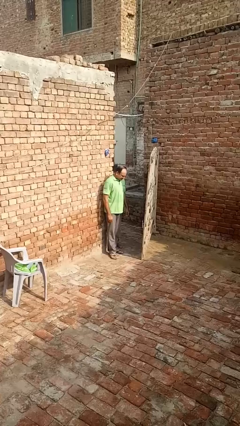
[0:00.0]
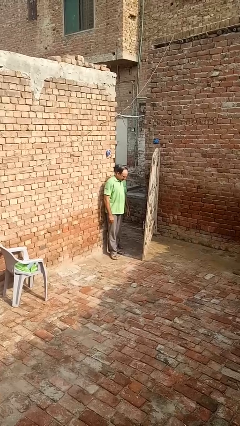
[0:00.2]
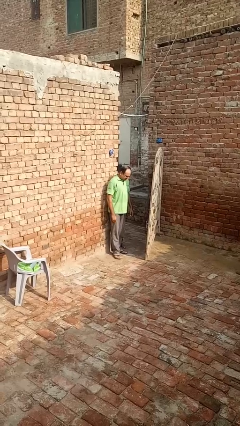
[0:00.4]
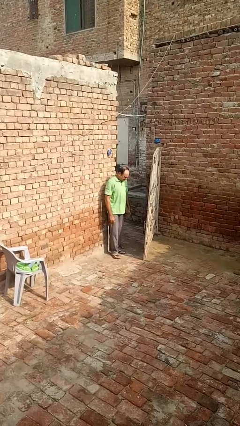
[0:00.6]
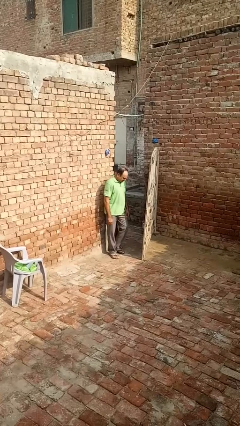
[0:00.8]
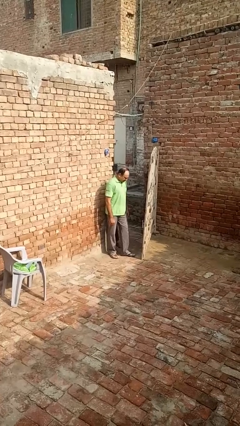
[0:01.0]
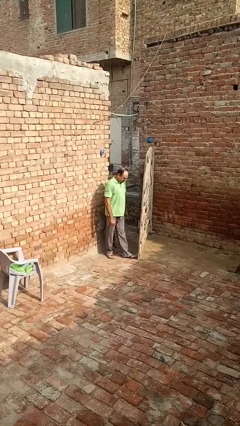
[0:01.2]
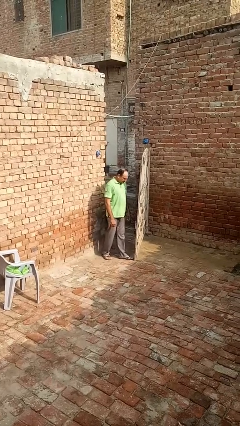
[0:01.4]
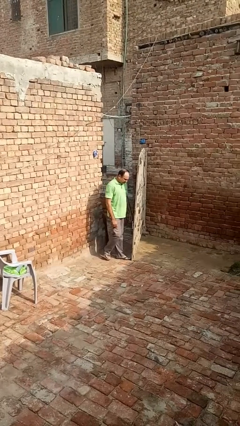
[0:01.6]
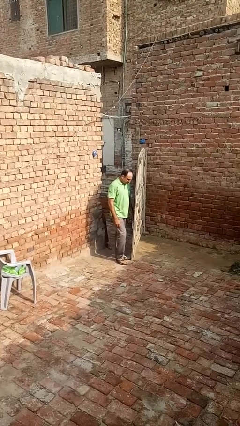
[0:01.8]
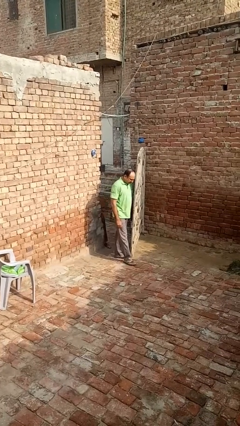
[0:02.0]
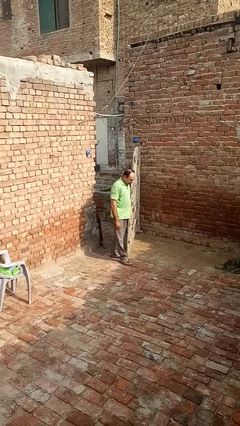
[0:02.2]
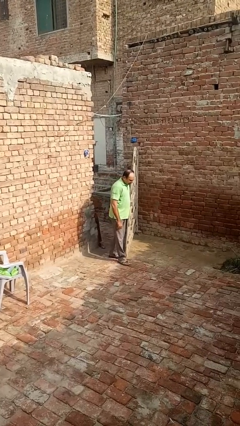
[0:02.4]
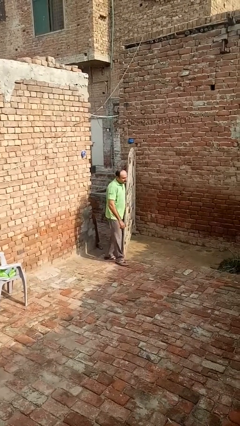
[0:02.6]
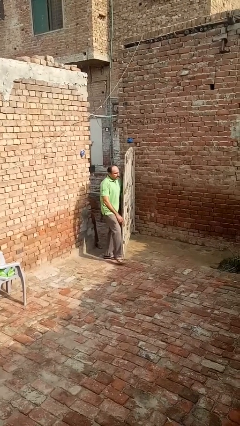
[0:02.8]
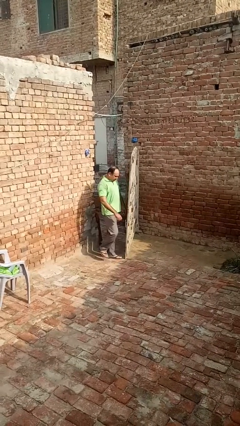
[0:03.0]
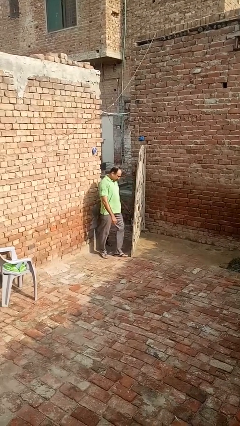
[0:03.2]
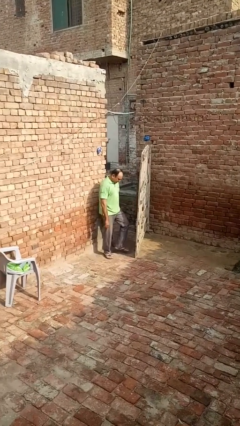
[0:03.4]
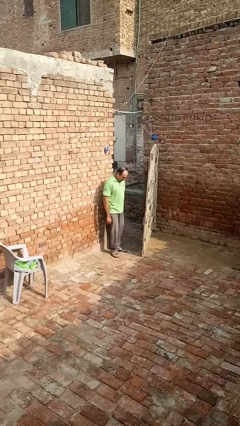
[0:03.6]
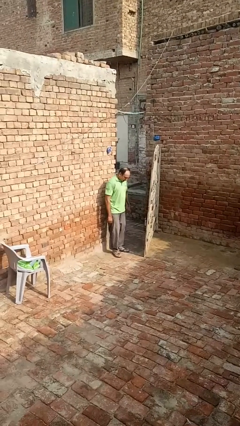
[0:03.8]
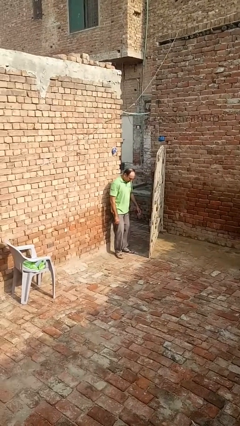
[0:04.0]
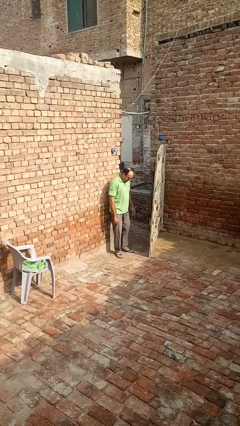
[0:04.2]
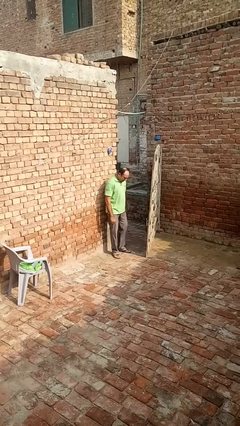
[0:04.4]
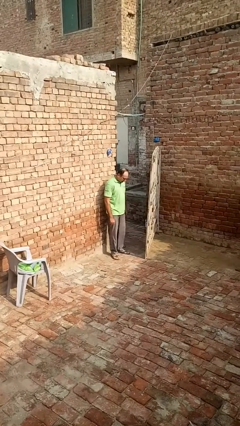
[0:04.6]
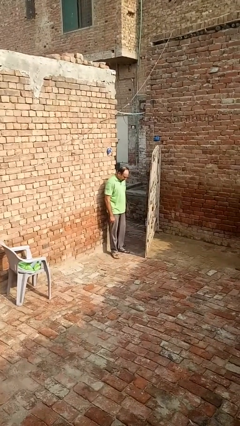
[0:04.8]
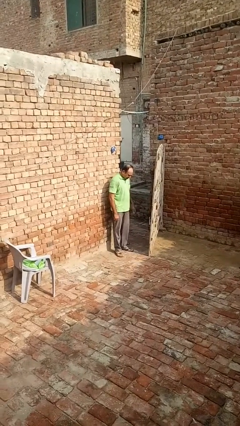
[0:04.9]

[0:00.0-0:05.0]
person bumps into wall

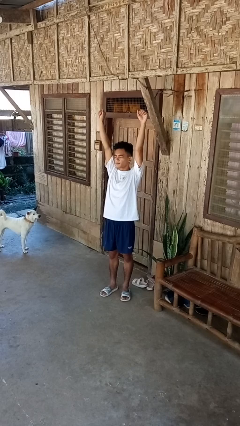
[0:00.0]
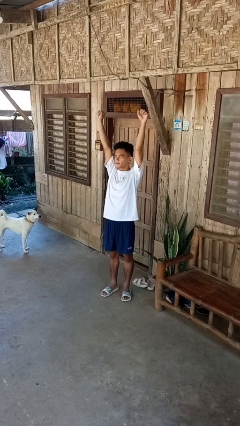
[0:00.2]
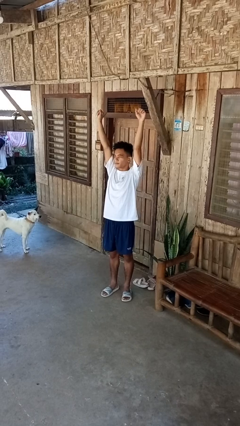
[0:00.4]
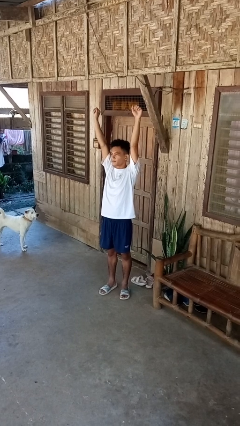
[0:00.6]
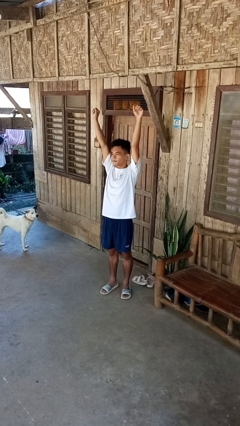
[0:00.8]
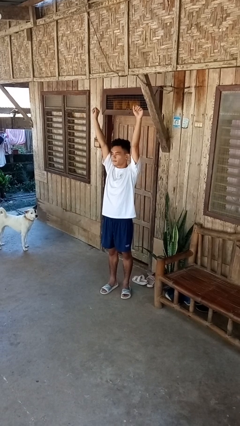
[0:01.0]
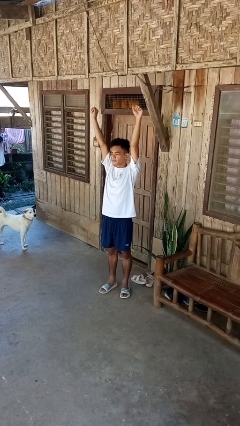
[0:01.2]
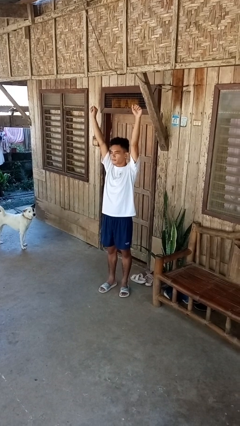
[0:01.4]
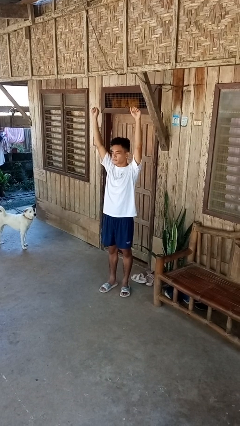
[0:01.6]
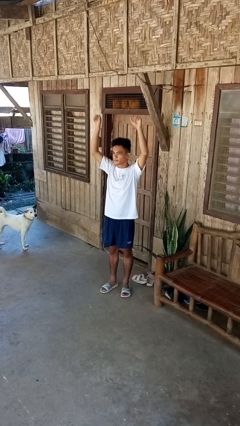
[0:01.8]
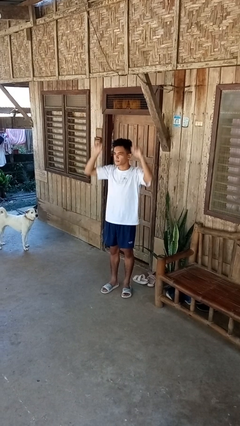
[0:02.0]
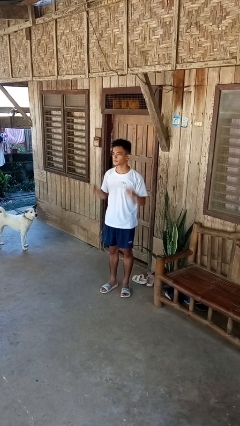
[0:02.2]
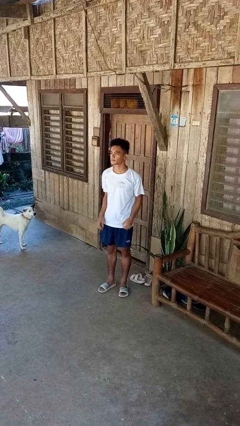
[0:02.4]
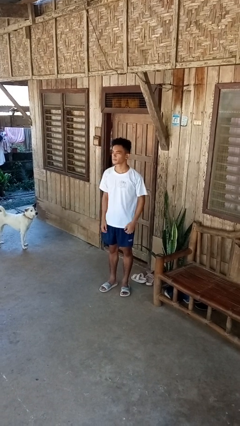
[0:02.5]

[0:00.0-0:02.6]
person stretches arms over head

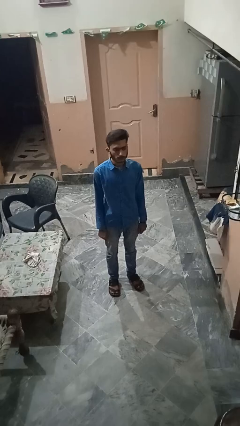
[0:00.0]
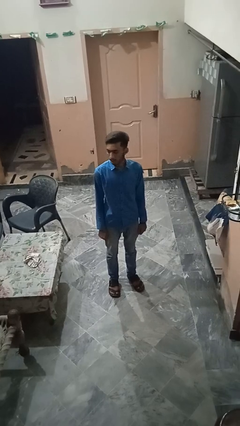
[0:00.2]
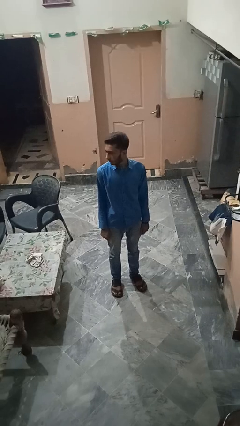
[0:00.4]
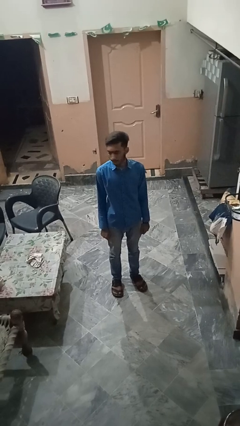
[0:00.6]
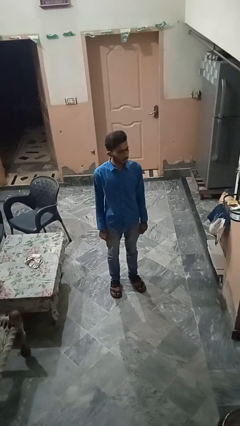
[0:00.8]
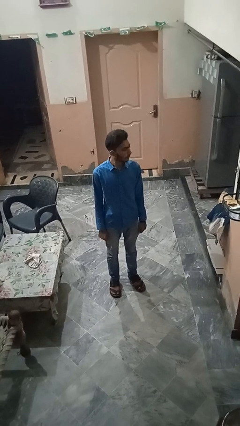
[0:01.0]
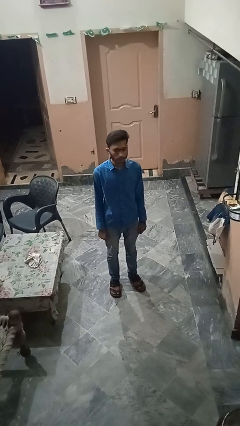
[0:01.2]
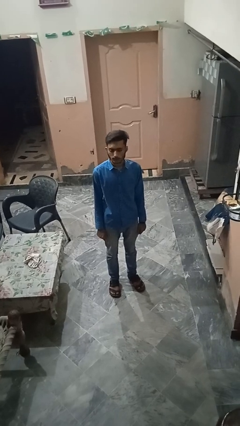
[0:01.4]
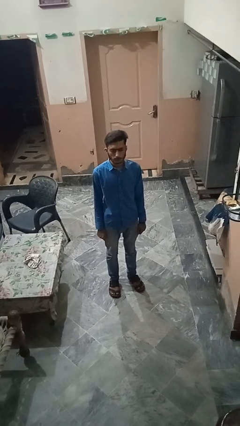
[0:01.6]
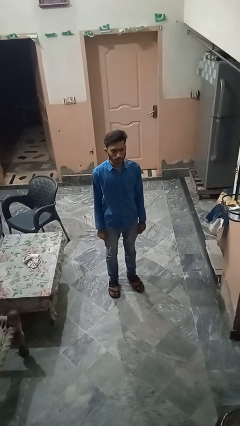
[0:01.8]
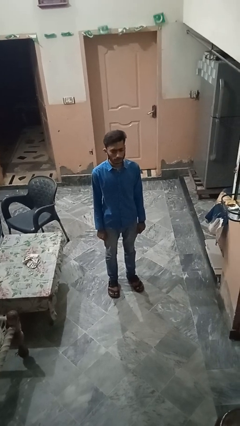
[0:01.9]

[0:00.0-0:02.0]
person shakes head

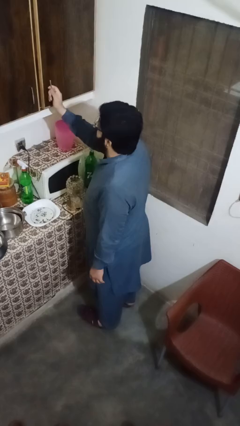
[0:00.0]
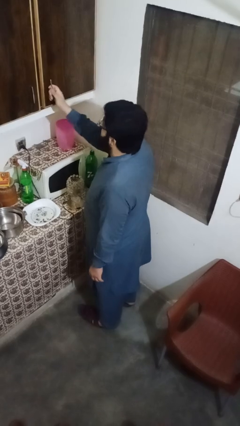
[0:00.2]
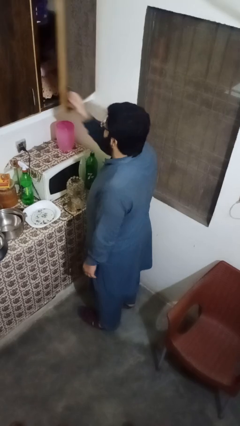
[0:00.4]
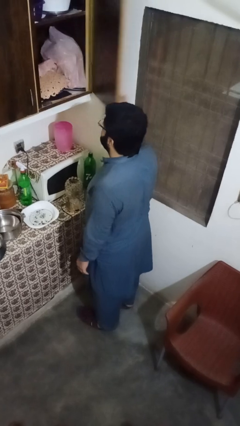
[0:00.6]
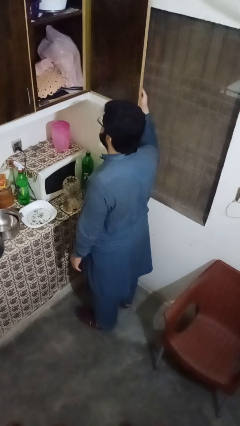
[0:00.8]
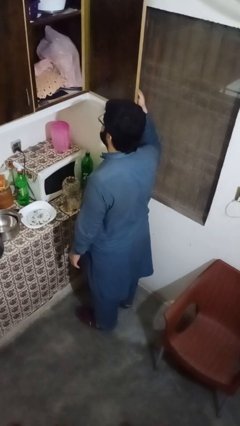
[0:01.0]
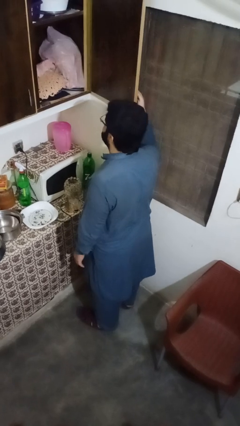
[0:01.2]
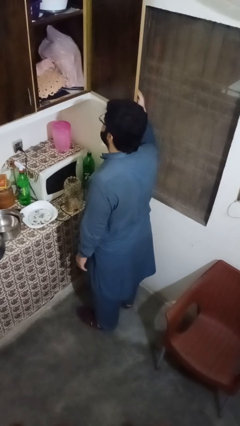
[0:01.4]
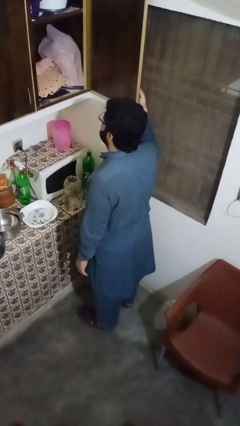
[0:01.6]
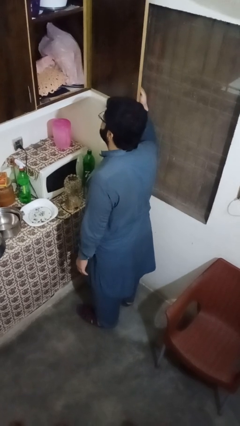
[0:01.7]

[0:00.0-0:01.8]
person closes cabinet

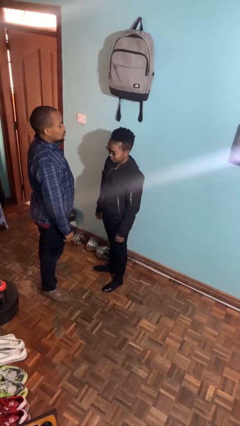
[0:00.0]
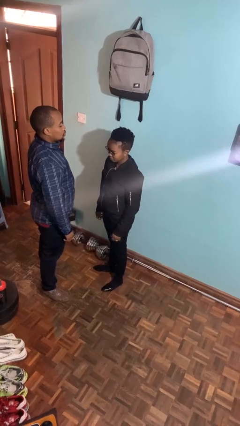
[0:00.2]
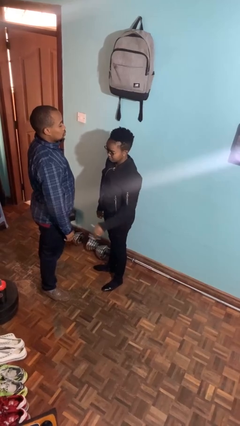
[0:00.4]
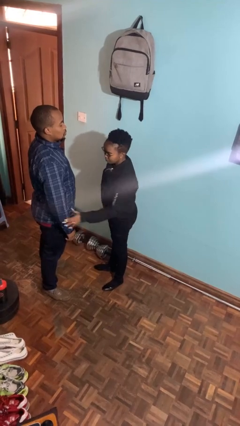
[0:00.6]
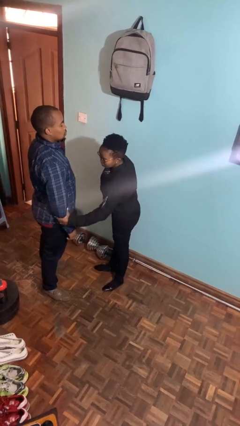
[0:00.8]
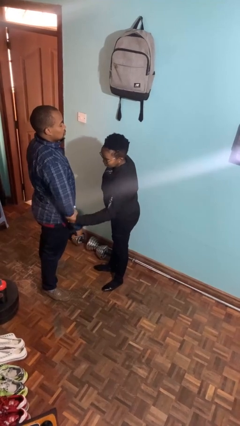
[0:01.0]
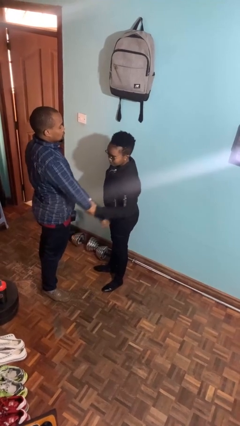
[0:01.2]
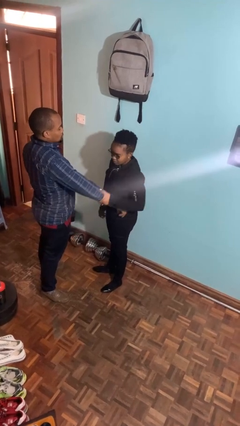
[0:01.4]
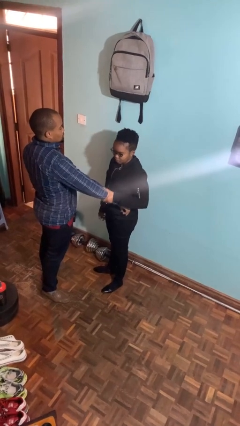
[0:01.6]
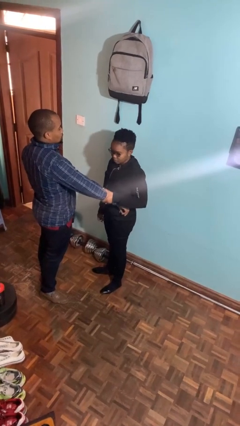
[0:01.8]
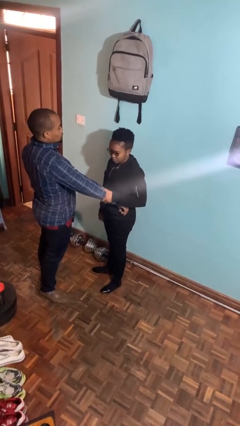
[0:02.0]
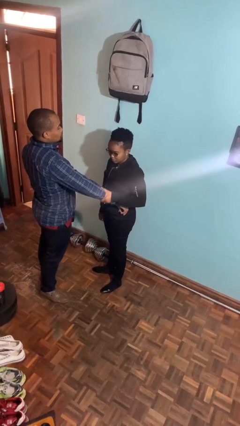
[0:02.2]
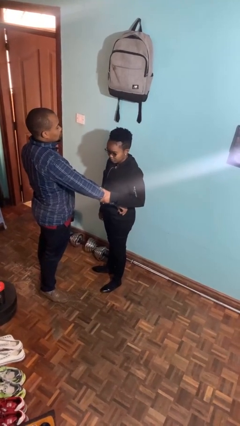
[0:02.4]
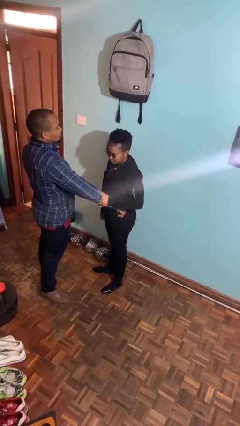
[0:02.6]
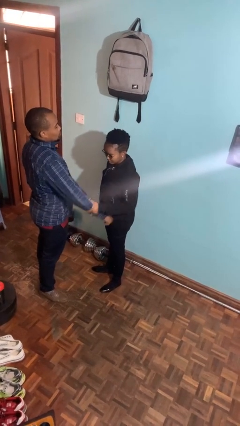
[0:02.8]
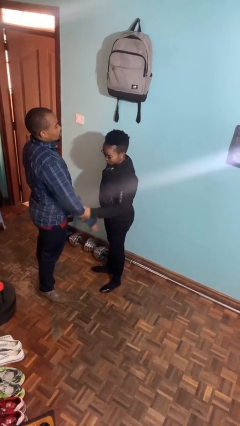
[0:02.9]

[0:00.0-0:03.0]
person grabs person by forearm

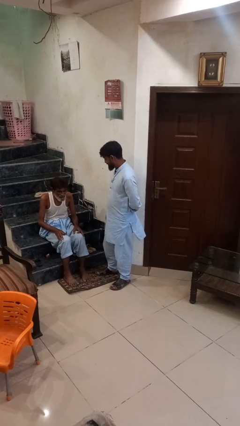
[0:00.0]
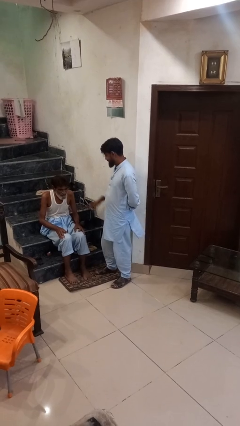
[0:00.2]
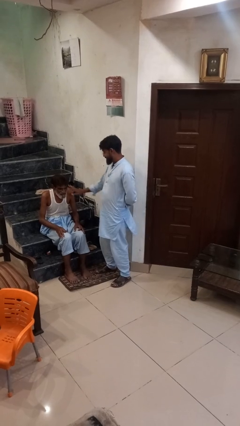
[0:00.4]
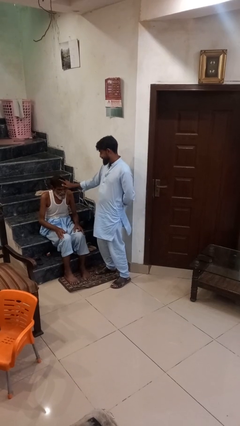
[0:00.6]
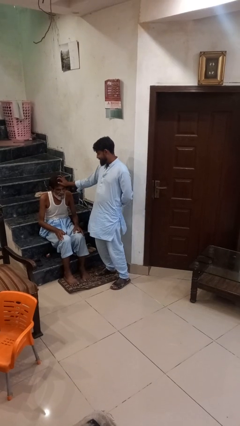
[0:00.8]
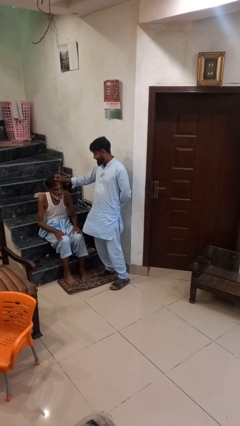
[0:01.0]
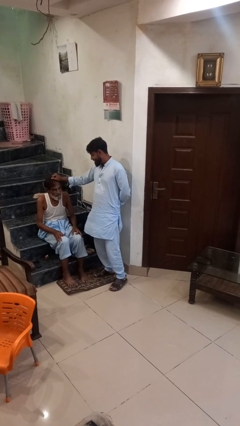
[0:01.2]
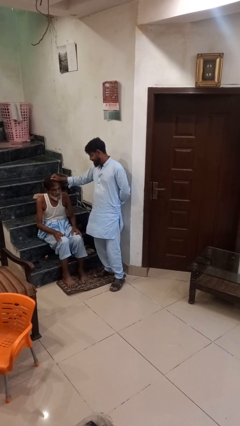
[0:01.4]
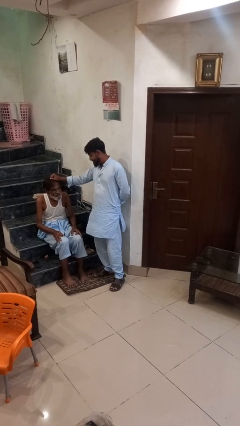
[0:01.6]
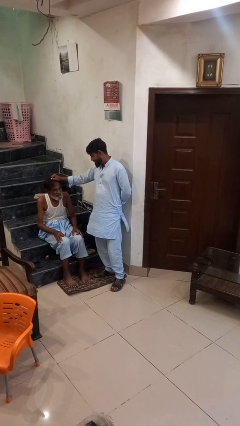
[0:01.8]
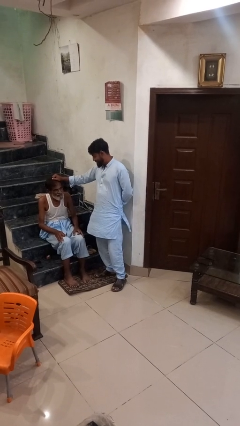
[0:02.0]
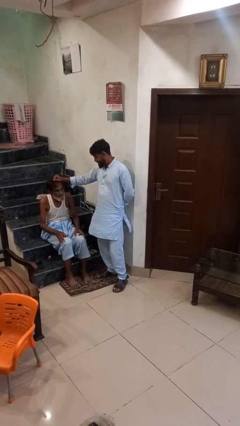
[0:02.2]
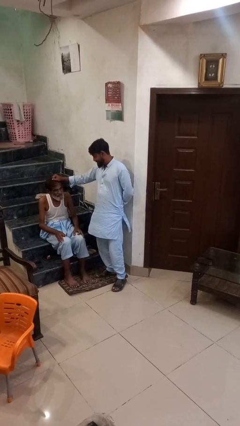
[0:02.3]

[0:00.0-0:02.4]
person grabs person by hair
